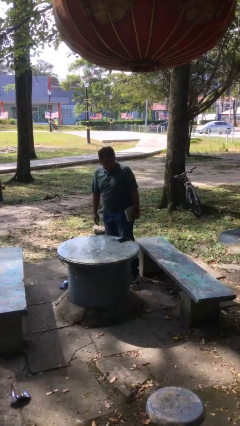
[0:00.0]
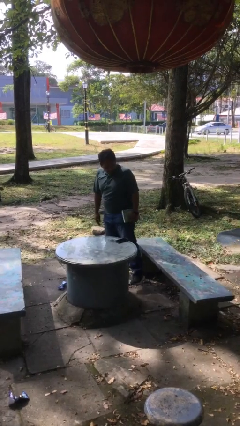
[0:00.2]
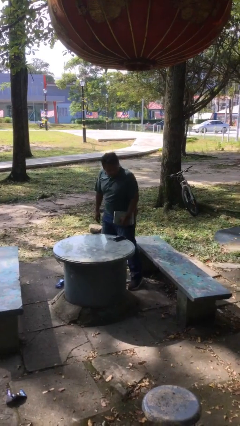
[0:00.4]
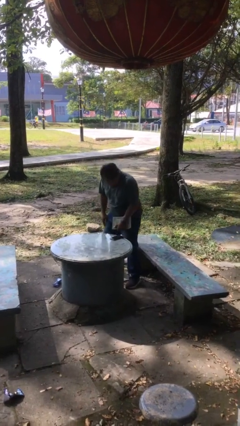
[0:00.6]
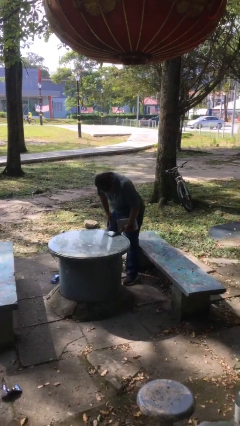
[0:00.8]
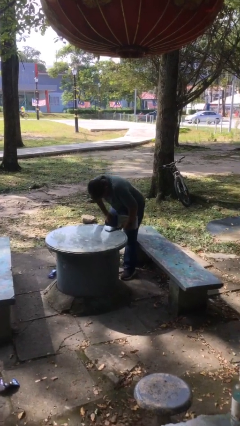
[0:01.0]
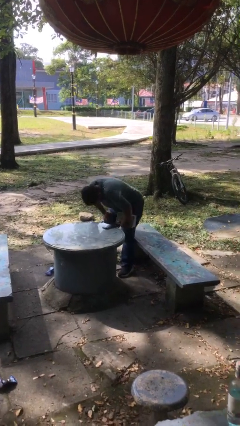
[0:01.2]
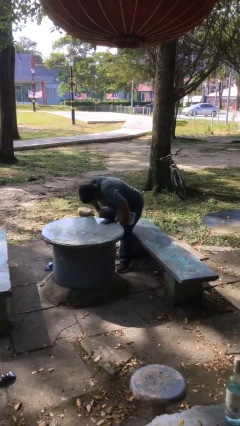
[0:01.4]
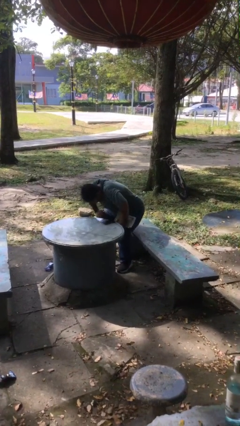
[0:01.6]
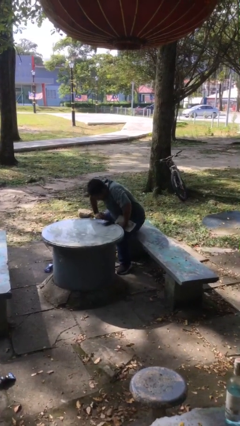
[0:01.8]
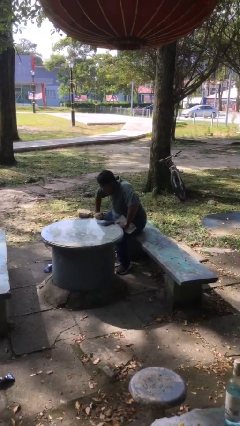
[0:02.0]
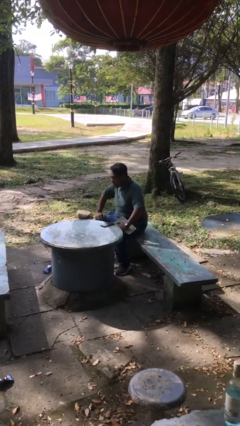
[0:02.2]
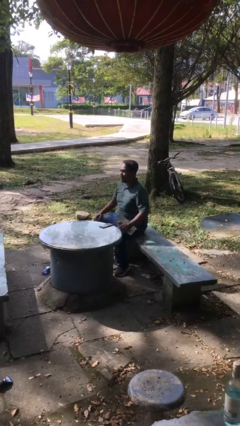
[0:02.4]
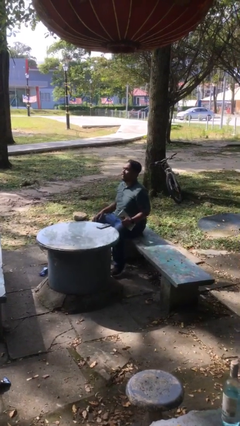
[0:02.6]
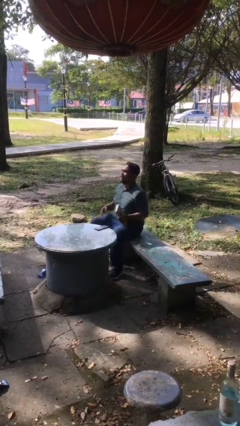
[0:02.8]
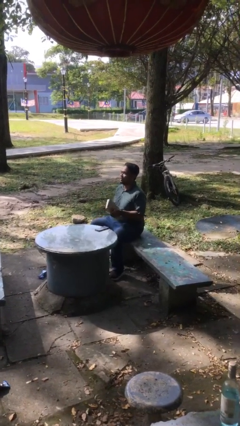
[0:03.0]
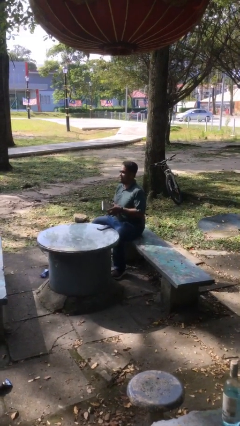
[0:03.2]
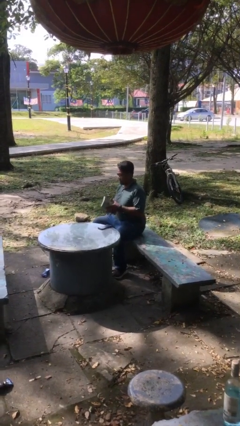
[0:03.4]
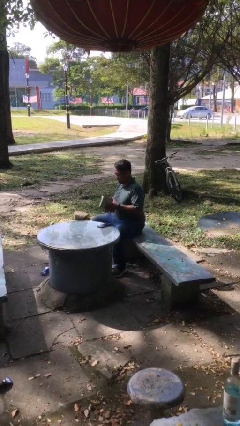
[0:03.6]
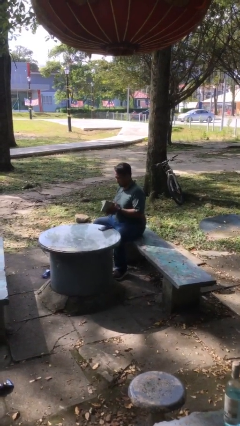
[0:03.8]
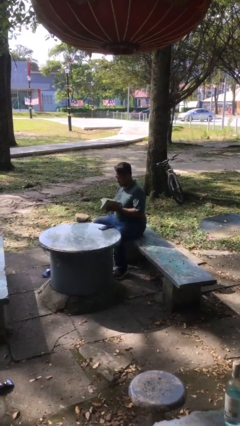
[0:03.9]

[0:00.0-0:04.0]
person sits down

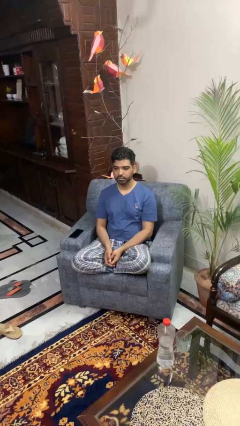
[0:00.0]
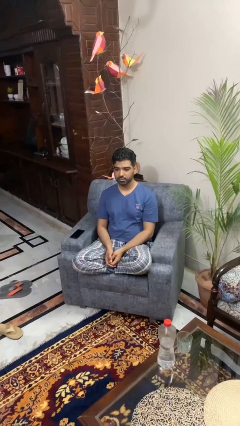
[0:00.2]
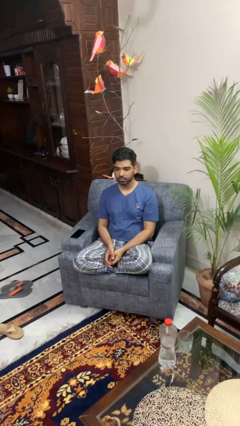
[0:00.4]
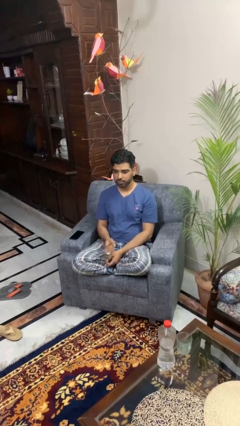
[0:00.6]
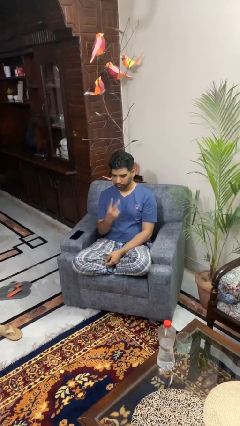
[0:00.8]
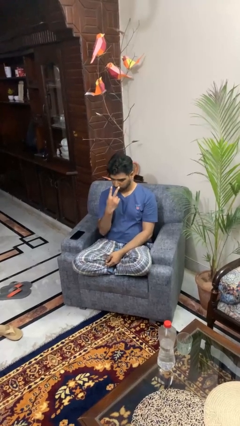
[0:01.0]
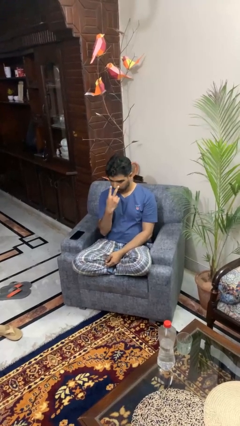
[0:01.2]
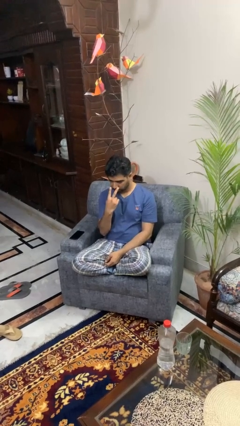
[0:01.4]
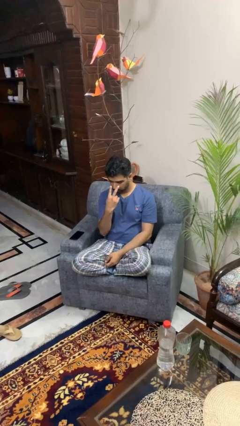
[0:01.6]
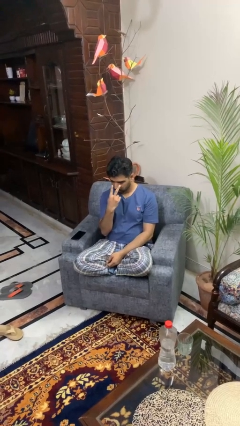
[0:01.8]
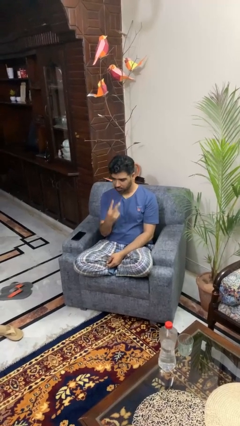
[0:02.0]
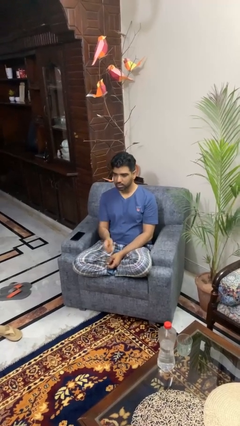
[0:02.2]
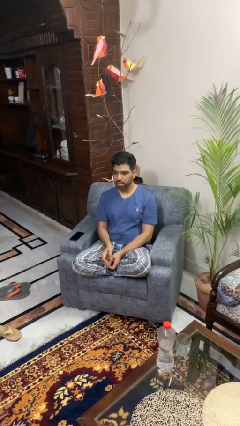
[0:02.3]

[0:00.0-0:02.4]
person gestures watch closely

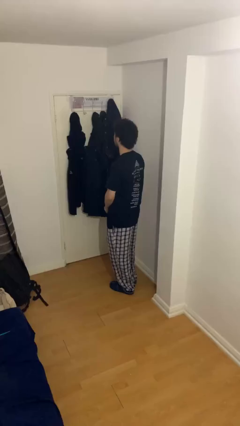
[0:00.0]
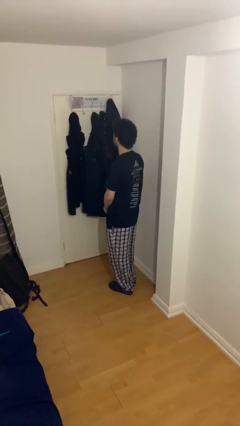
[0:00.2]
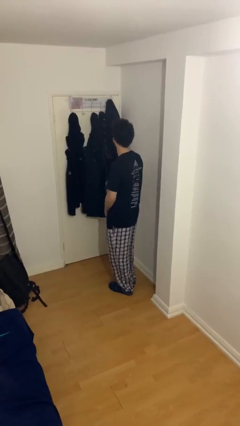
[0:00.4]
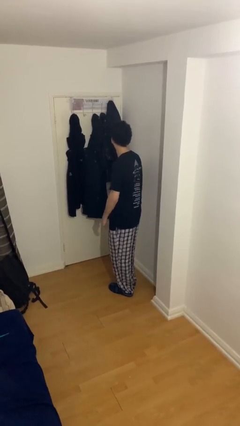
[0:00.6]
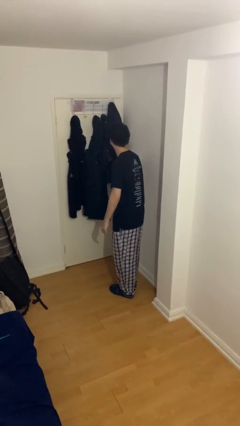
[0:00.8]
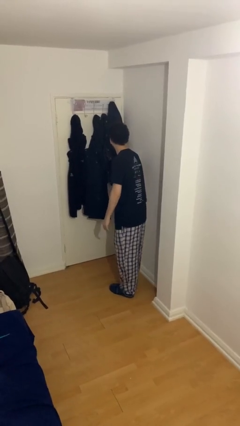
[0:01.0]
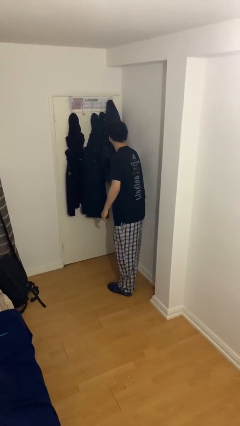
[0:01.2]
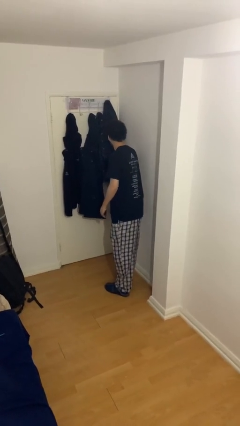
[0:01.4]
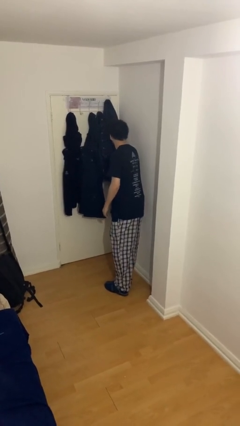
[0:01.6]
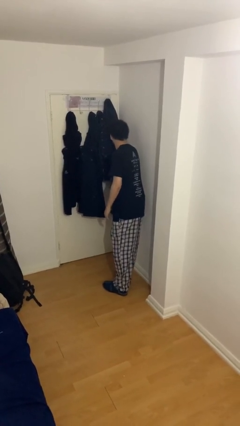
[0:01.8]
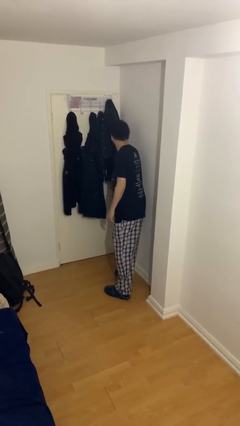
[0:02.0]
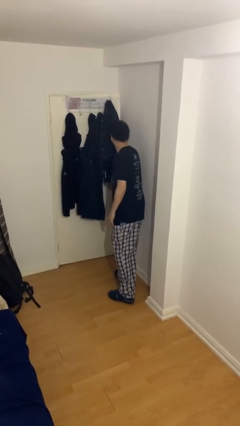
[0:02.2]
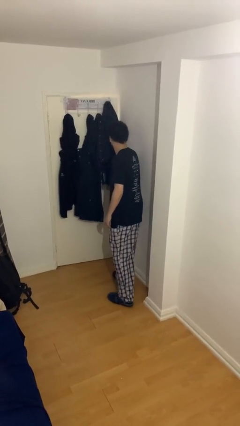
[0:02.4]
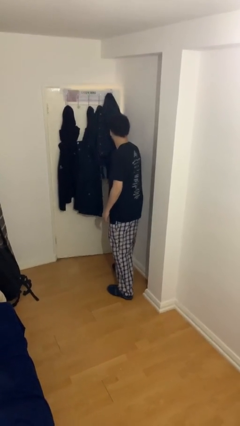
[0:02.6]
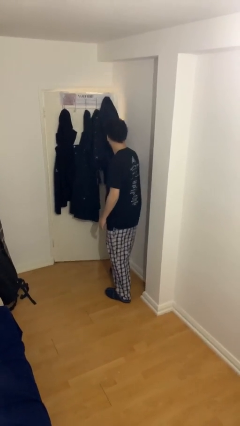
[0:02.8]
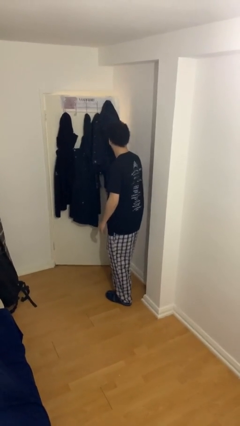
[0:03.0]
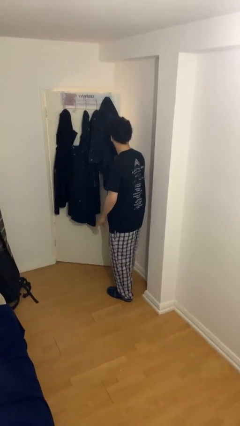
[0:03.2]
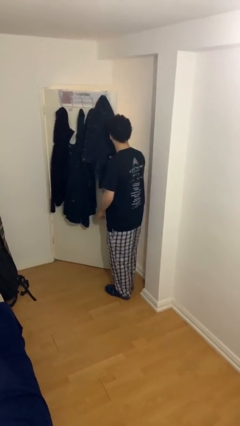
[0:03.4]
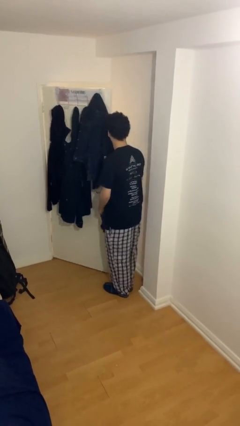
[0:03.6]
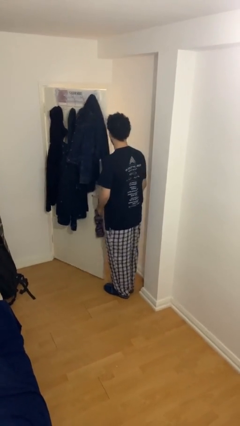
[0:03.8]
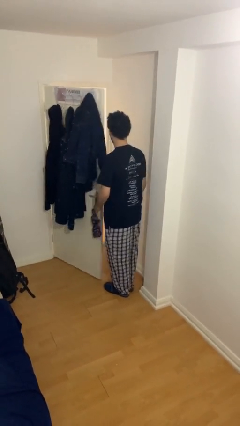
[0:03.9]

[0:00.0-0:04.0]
person opens facility door

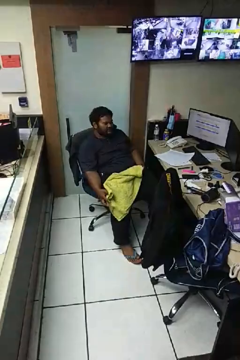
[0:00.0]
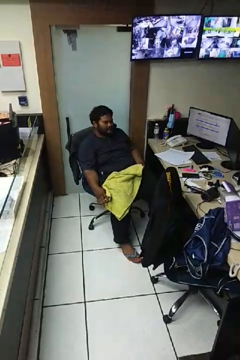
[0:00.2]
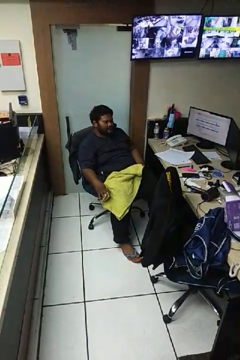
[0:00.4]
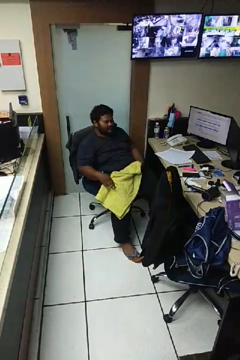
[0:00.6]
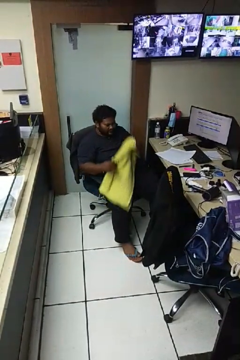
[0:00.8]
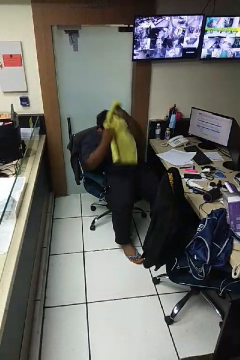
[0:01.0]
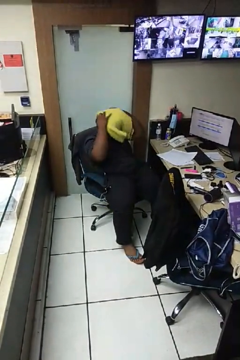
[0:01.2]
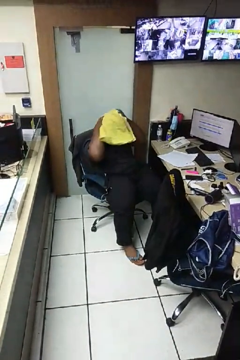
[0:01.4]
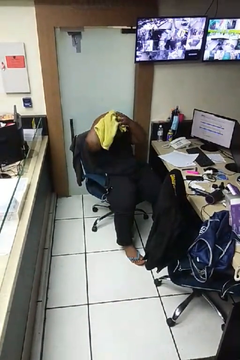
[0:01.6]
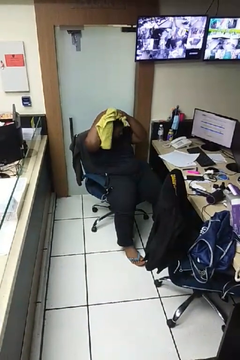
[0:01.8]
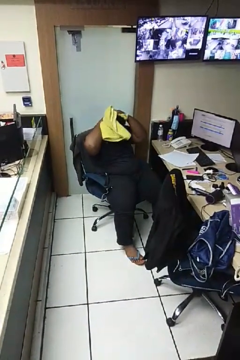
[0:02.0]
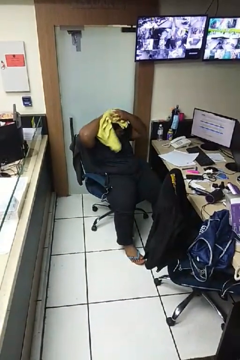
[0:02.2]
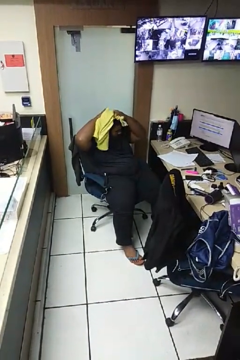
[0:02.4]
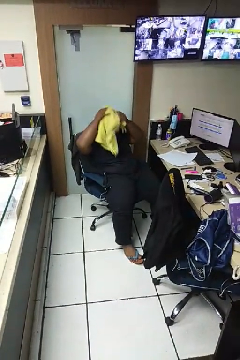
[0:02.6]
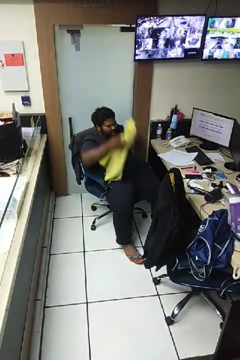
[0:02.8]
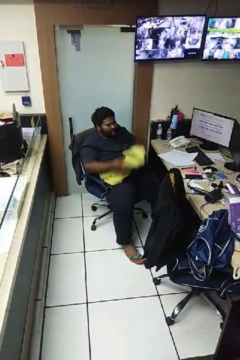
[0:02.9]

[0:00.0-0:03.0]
person dries hair with towel

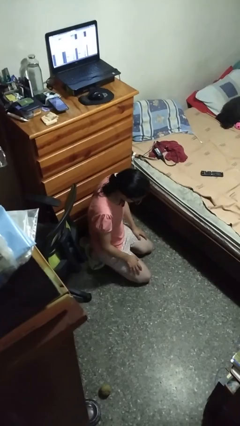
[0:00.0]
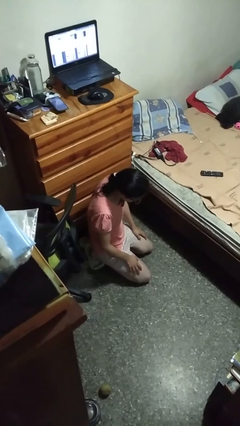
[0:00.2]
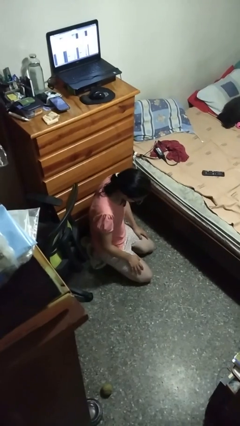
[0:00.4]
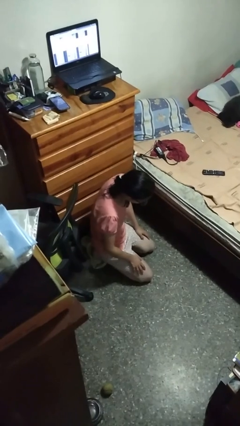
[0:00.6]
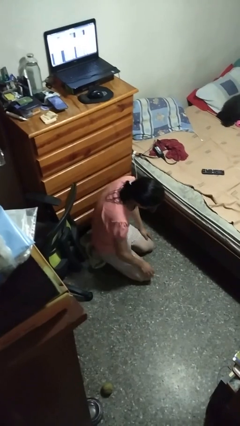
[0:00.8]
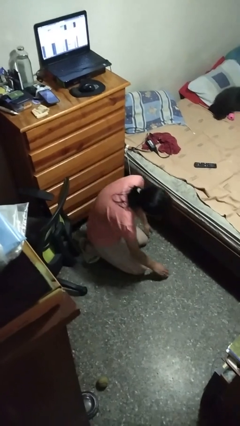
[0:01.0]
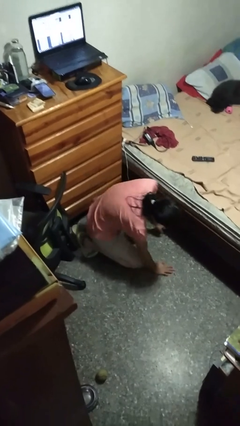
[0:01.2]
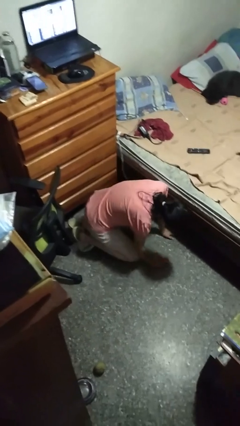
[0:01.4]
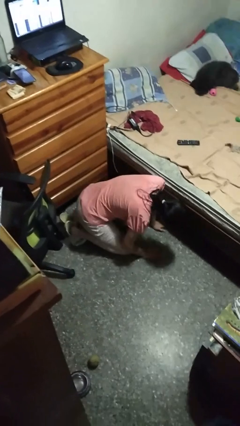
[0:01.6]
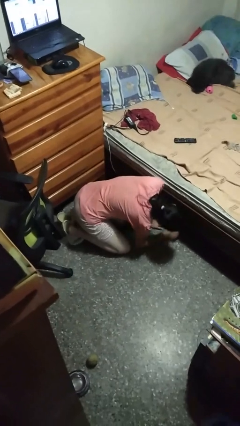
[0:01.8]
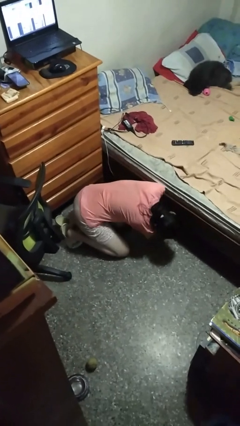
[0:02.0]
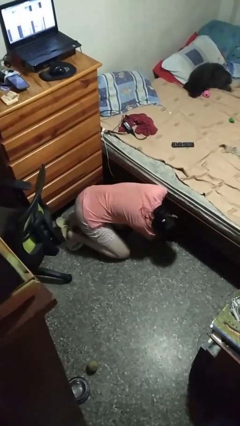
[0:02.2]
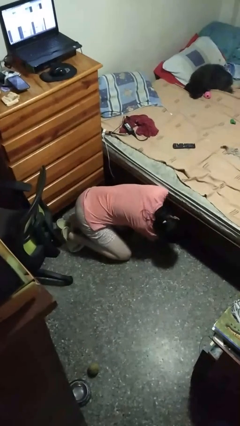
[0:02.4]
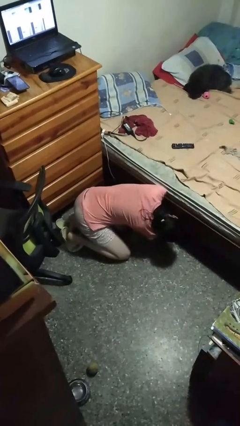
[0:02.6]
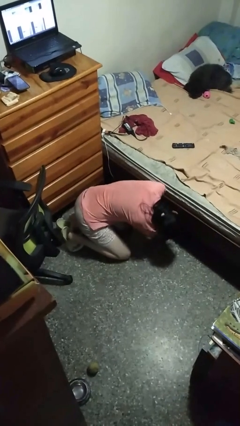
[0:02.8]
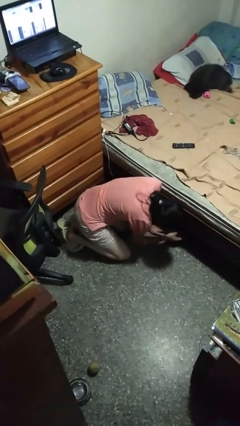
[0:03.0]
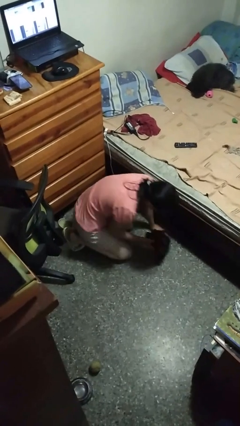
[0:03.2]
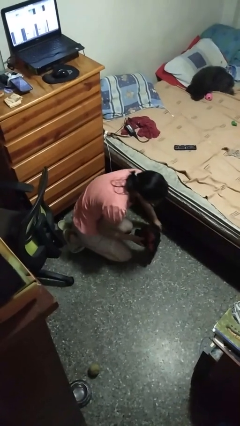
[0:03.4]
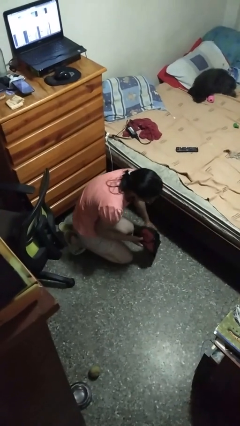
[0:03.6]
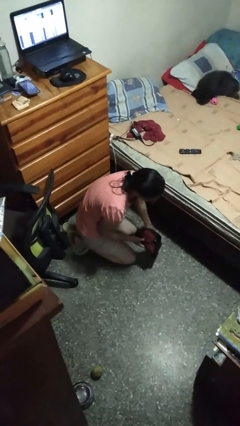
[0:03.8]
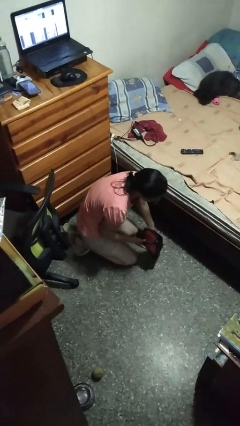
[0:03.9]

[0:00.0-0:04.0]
person searches under bed

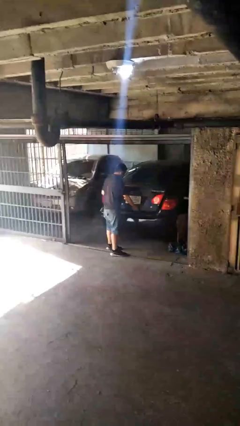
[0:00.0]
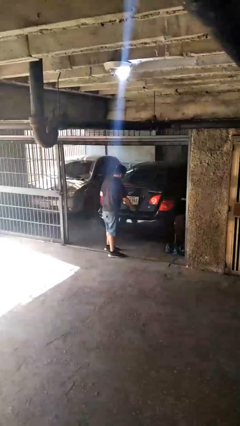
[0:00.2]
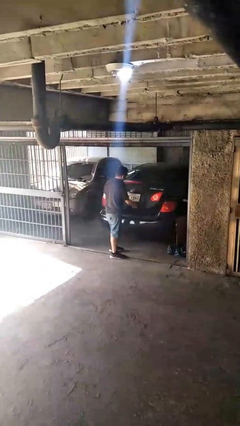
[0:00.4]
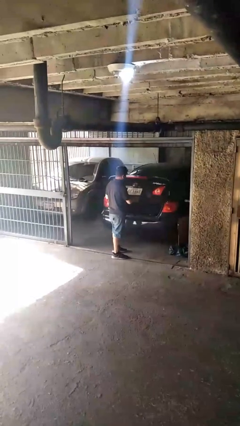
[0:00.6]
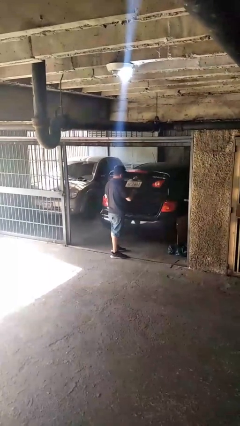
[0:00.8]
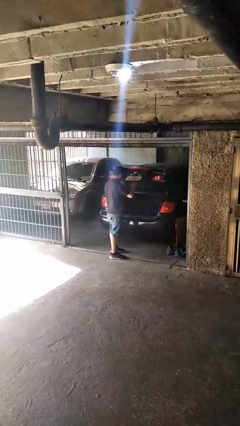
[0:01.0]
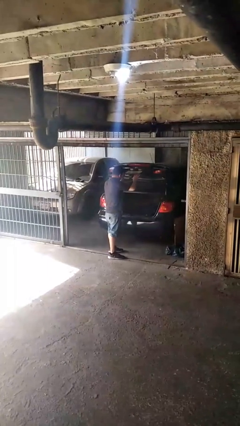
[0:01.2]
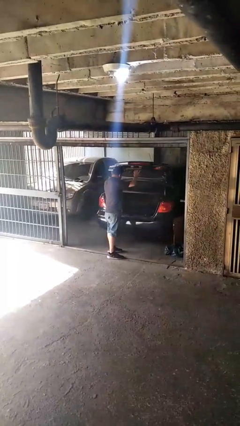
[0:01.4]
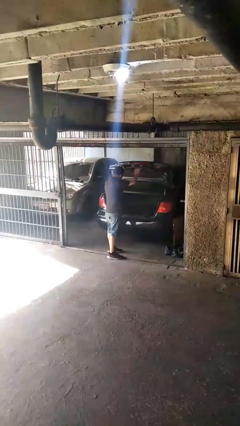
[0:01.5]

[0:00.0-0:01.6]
person opens car trunk
